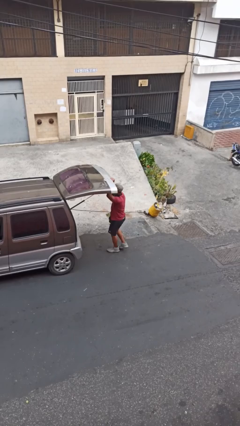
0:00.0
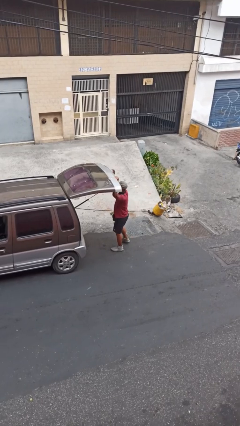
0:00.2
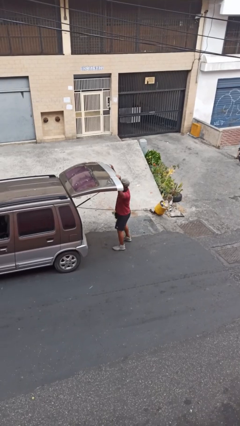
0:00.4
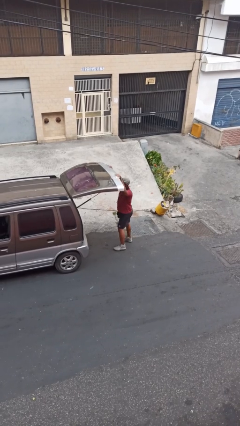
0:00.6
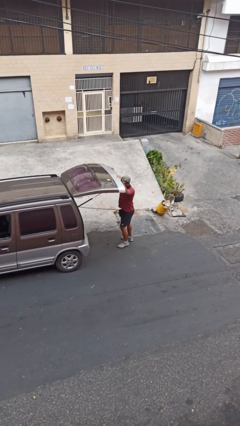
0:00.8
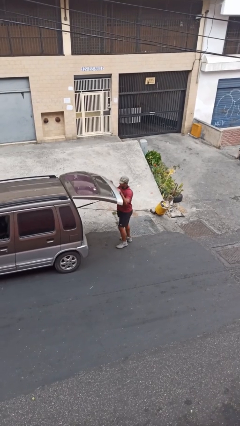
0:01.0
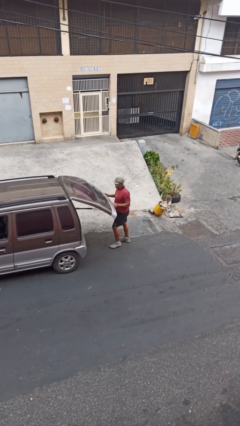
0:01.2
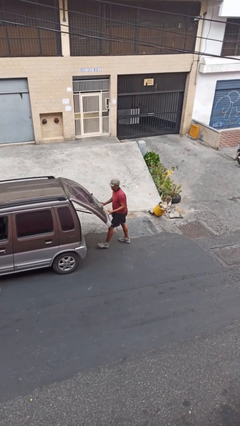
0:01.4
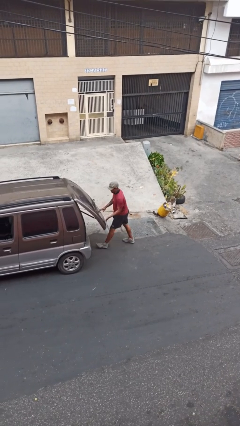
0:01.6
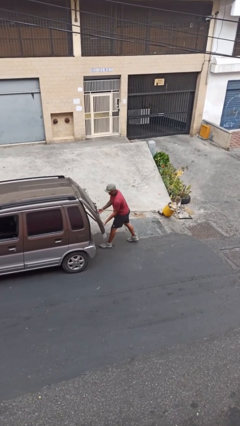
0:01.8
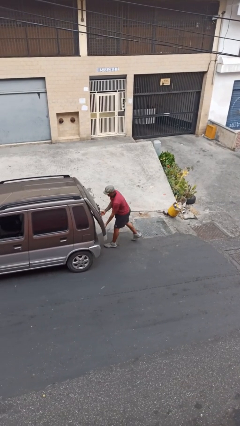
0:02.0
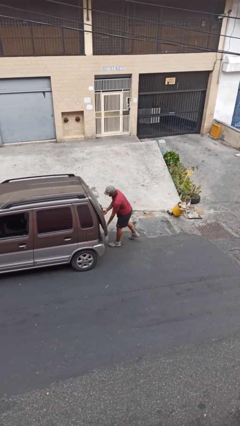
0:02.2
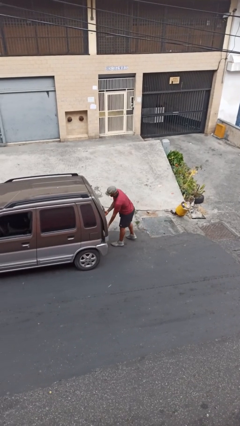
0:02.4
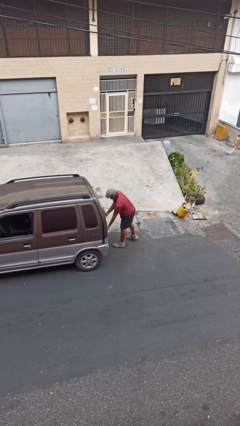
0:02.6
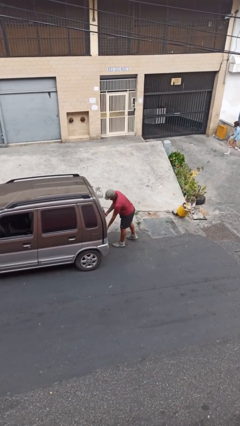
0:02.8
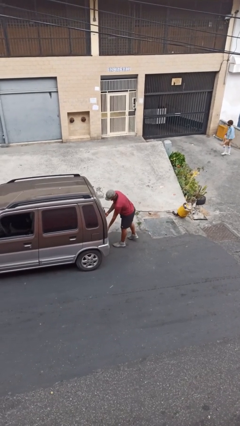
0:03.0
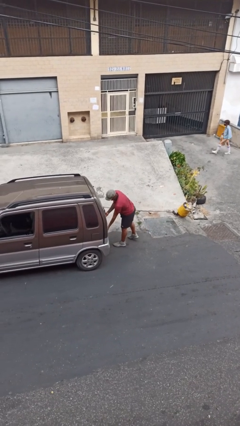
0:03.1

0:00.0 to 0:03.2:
person closes car trunk

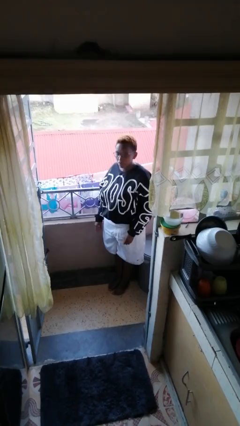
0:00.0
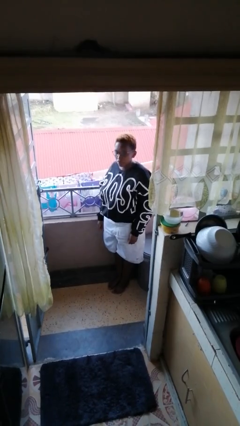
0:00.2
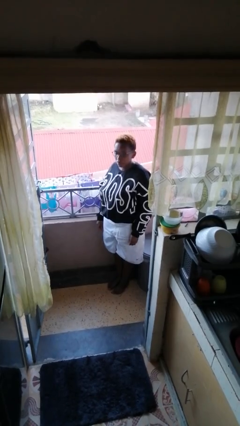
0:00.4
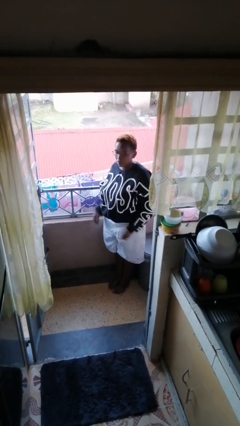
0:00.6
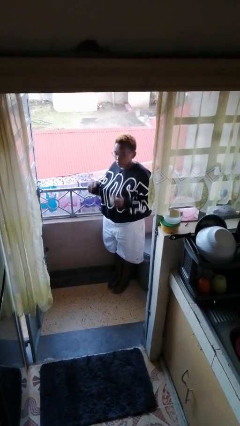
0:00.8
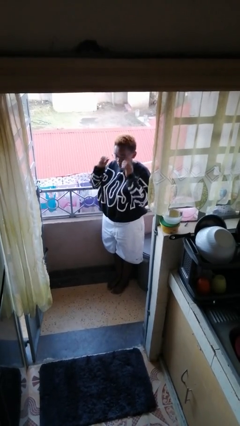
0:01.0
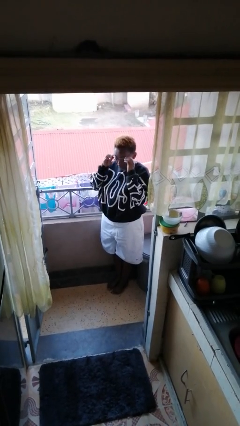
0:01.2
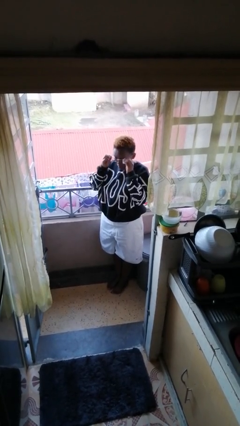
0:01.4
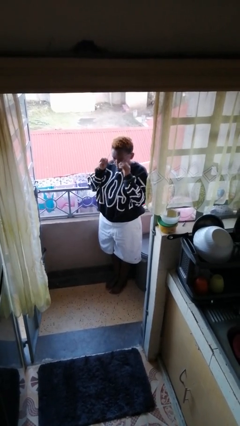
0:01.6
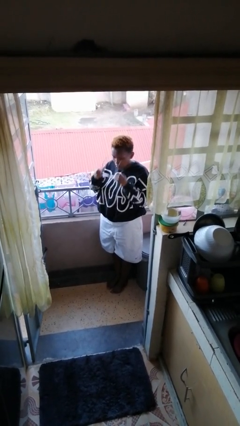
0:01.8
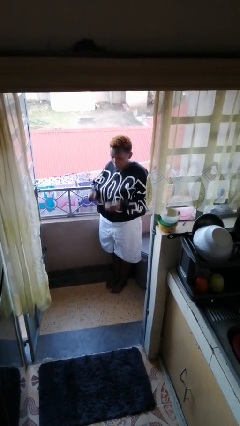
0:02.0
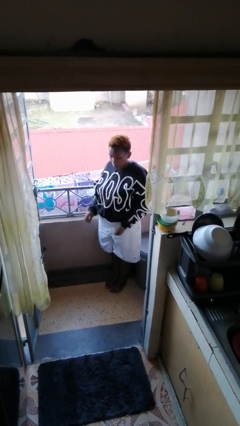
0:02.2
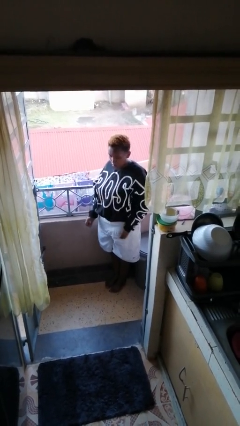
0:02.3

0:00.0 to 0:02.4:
person takes off glasses

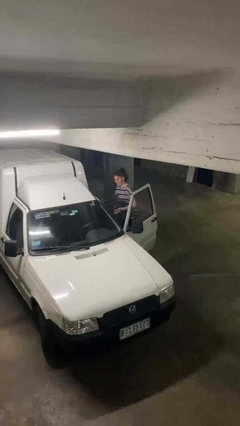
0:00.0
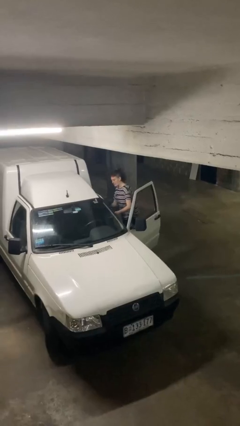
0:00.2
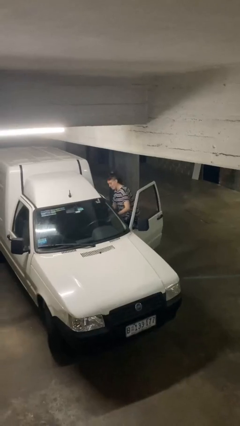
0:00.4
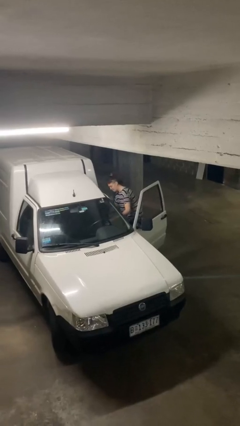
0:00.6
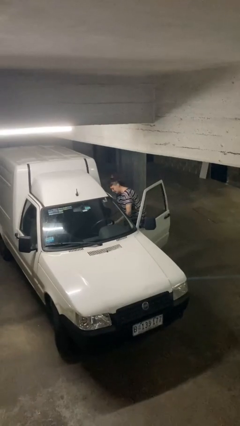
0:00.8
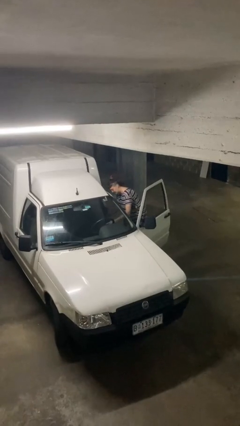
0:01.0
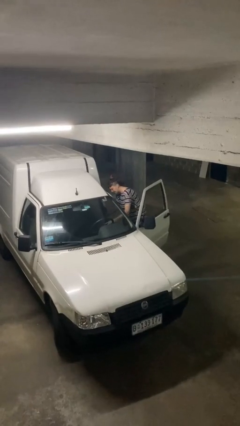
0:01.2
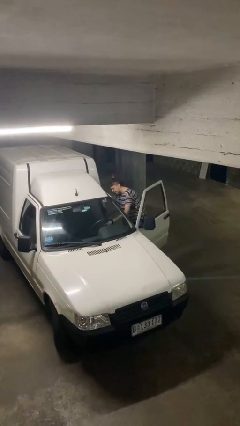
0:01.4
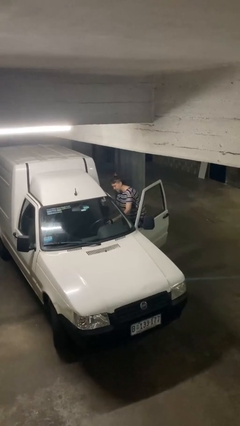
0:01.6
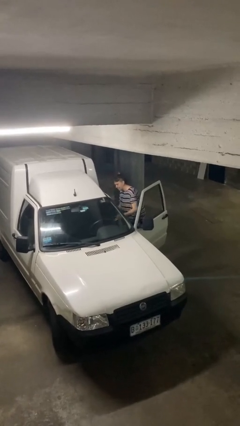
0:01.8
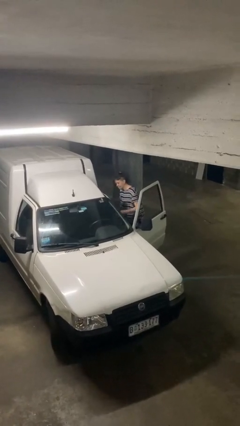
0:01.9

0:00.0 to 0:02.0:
person loads car

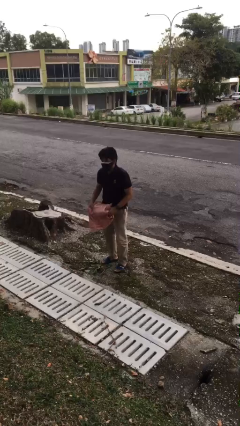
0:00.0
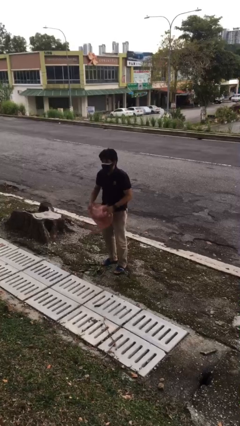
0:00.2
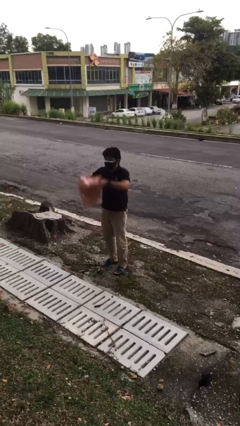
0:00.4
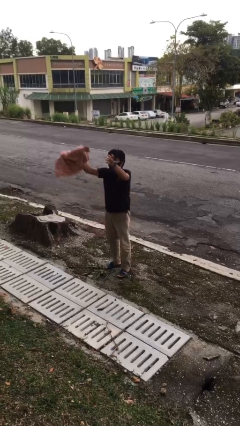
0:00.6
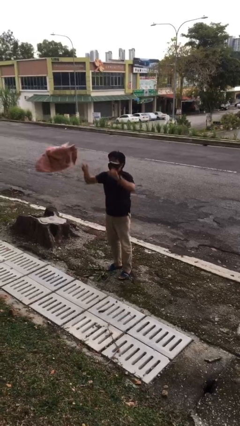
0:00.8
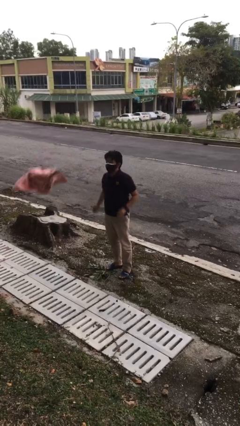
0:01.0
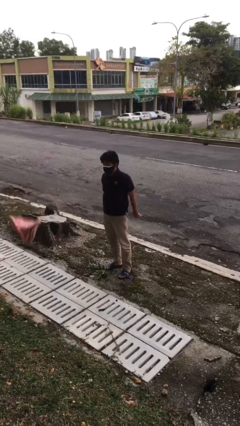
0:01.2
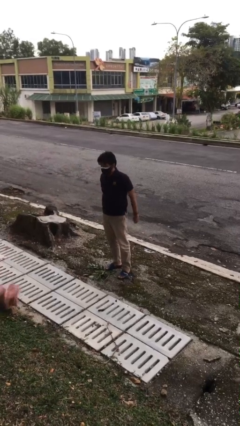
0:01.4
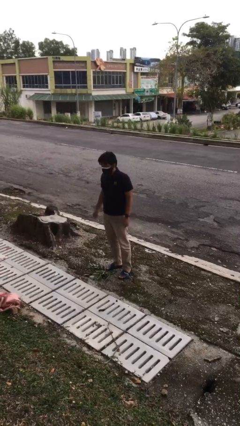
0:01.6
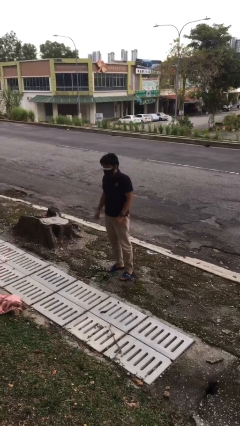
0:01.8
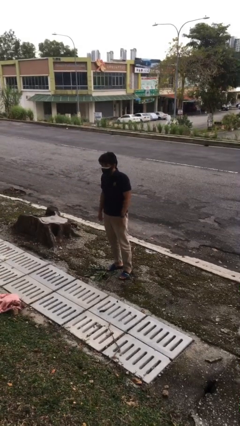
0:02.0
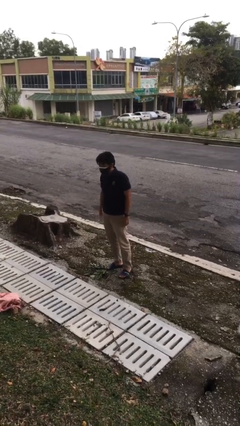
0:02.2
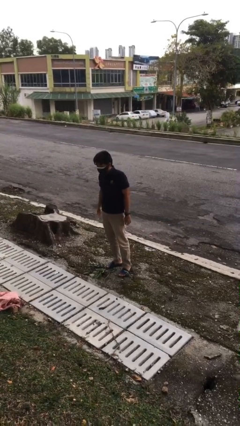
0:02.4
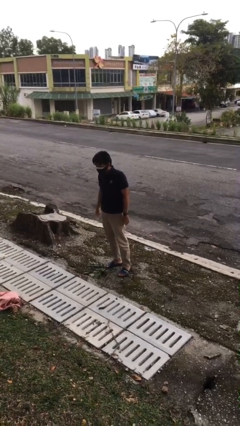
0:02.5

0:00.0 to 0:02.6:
person throws object into air

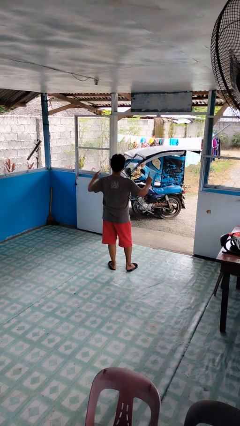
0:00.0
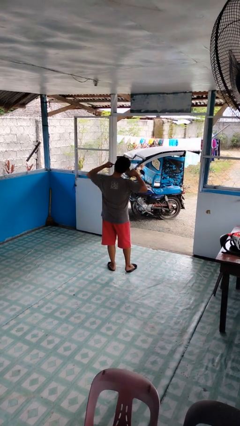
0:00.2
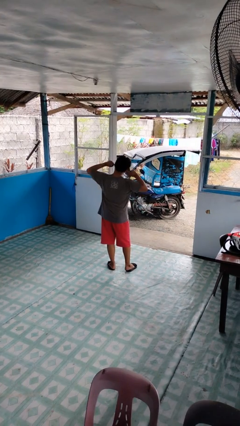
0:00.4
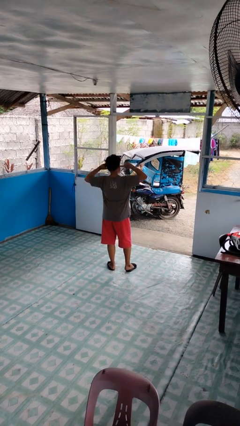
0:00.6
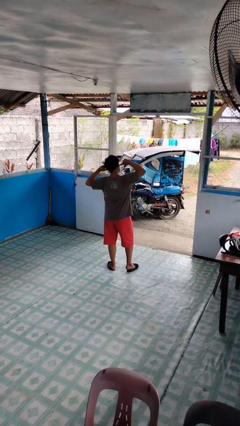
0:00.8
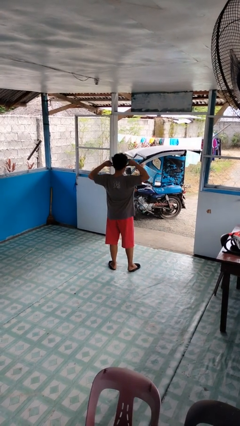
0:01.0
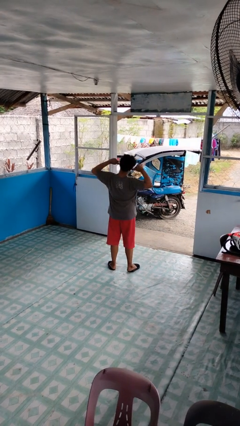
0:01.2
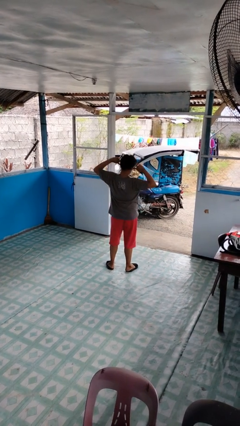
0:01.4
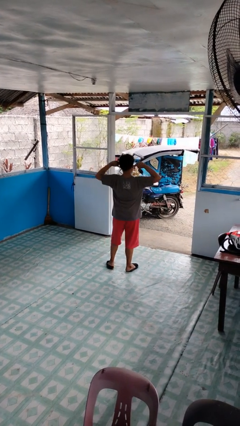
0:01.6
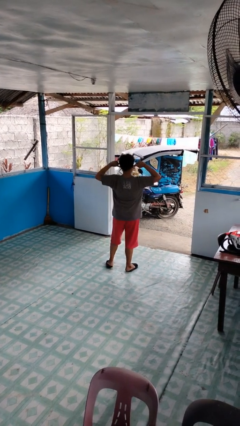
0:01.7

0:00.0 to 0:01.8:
person puts fingers in ear

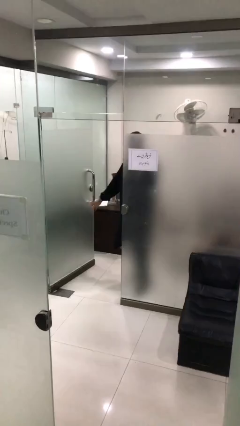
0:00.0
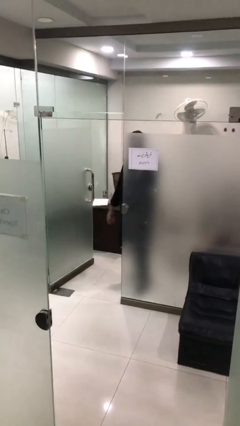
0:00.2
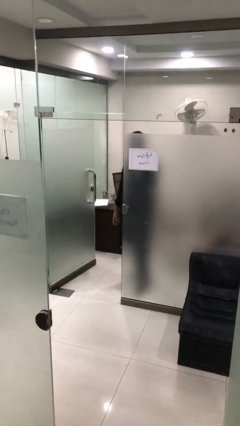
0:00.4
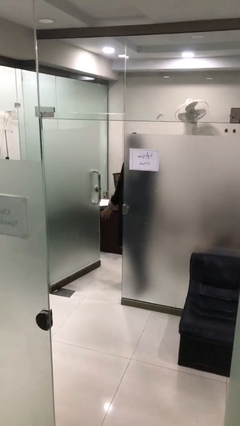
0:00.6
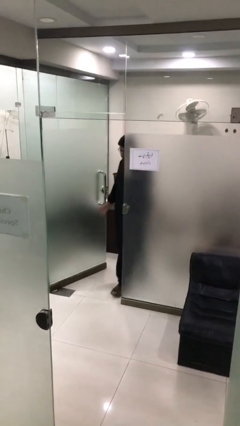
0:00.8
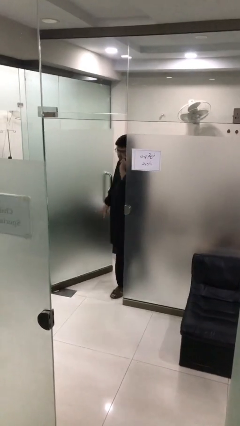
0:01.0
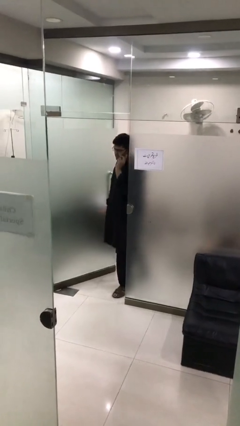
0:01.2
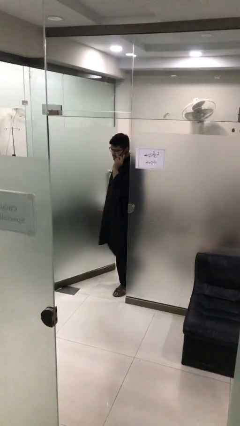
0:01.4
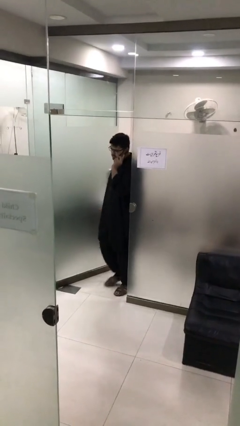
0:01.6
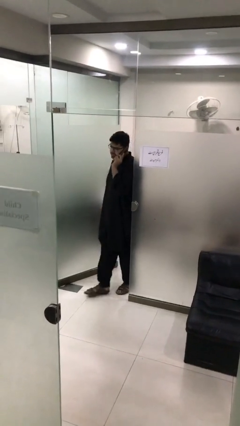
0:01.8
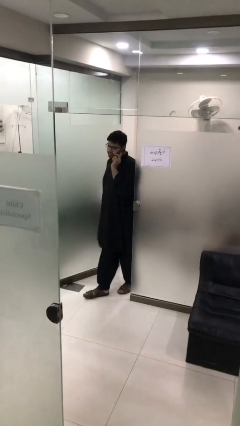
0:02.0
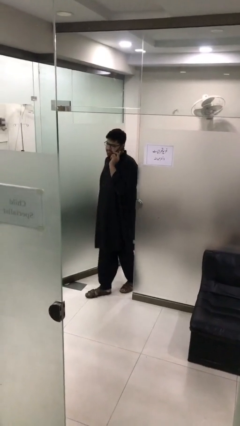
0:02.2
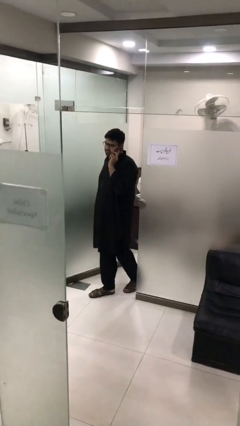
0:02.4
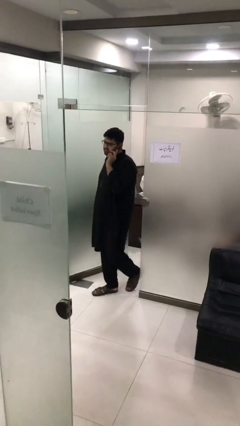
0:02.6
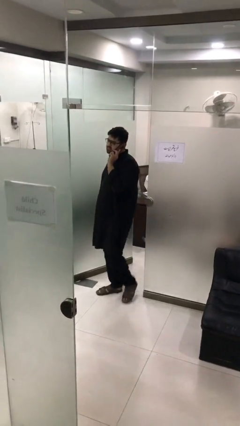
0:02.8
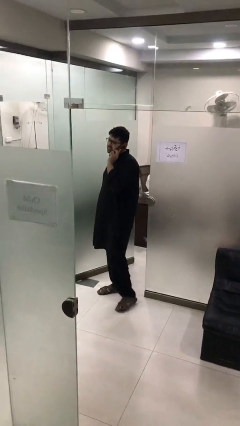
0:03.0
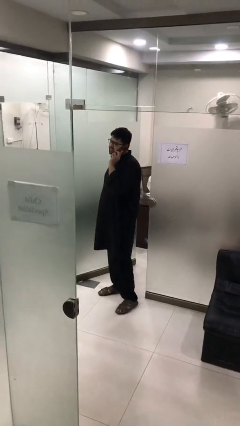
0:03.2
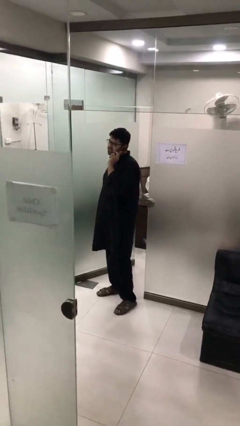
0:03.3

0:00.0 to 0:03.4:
person enters scene through structure

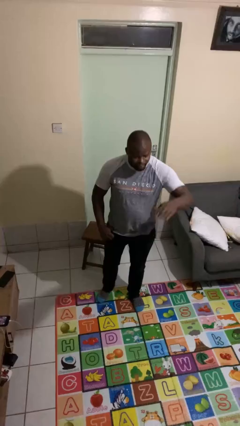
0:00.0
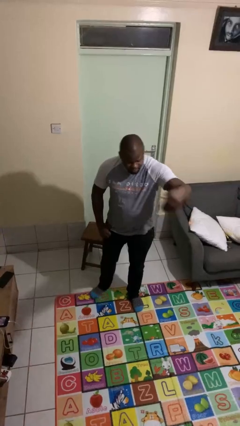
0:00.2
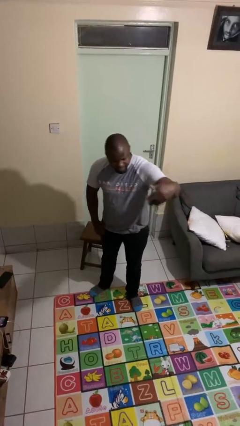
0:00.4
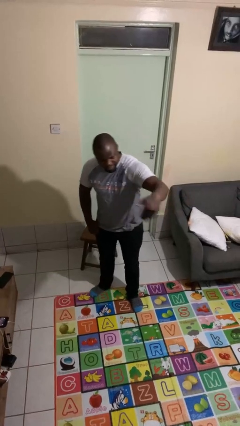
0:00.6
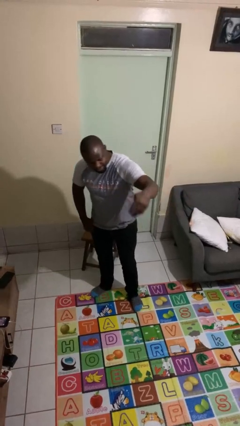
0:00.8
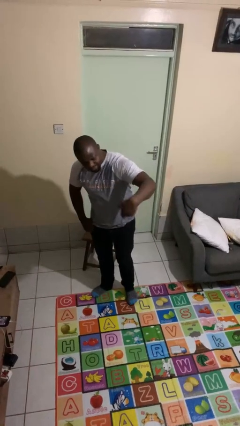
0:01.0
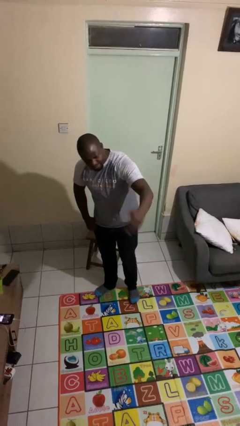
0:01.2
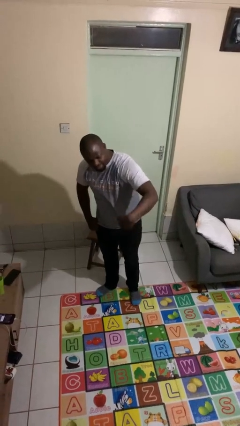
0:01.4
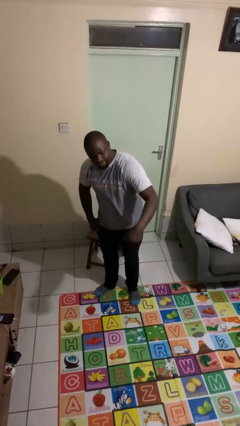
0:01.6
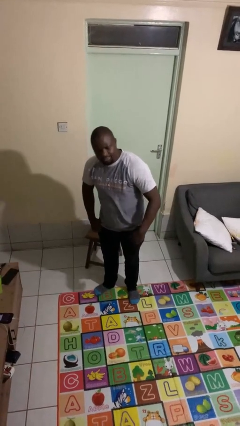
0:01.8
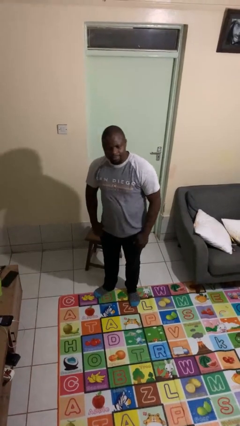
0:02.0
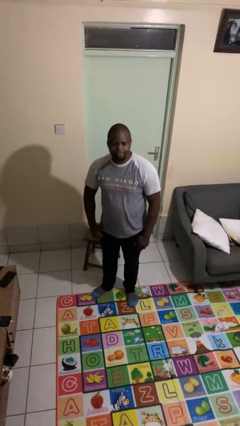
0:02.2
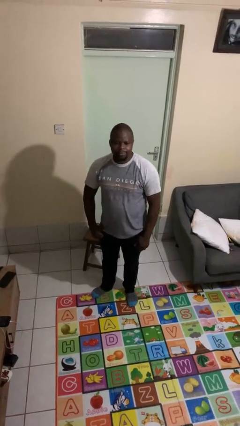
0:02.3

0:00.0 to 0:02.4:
person gestures come here
